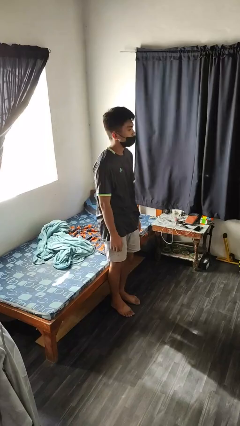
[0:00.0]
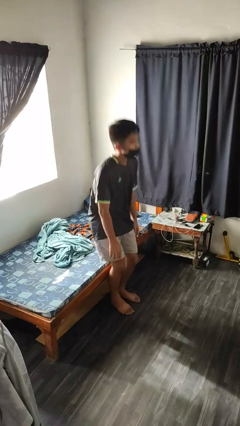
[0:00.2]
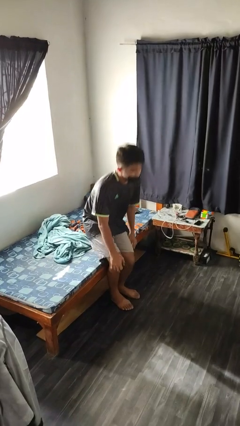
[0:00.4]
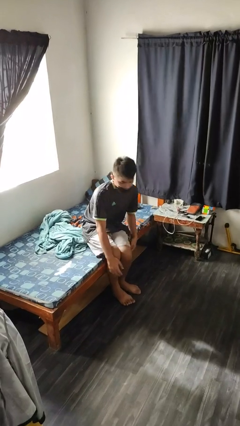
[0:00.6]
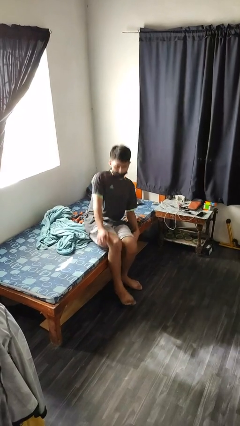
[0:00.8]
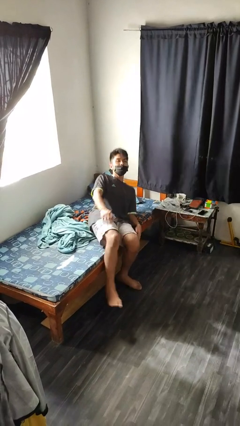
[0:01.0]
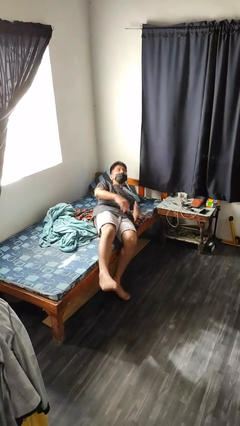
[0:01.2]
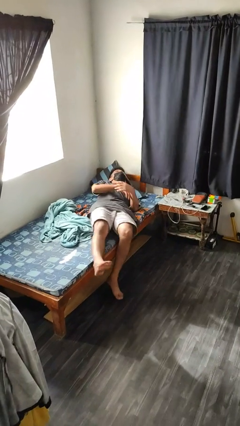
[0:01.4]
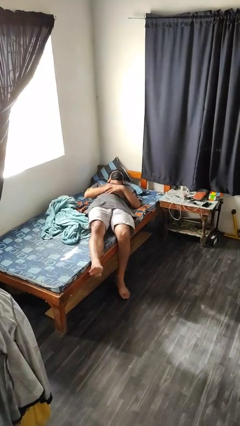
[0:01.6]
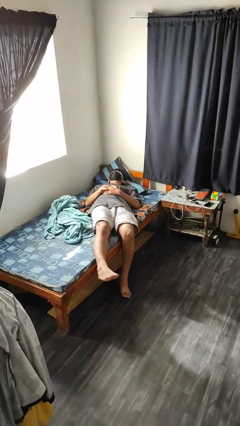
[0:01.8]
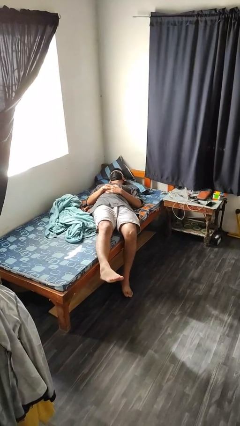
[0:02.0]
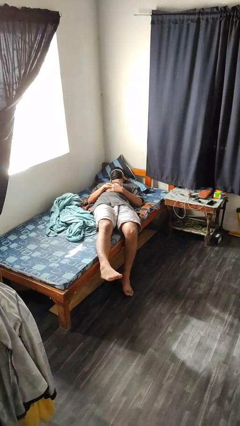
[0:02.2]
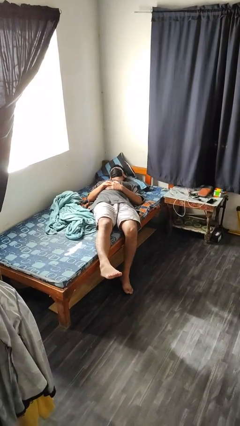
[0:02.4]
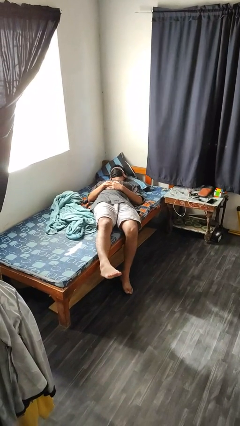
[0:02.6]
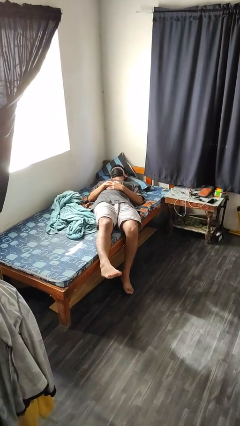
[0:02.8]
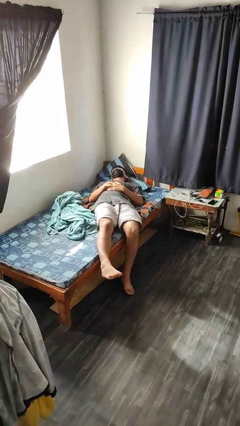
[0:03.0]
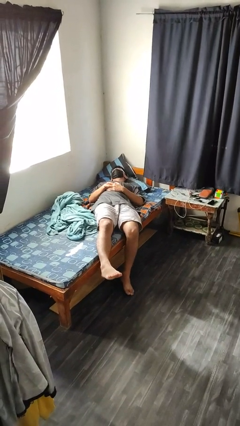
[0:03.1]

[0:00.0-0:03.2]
person lies down on bed

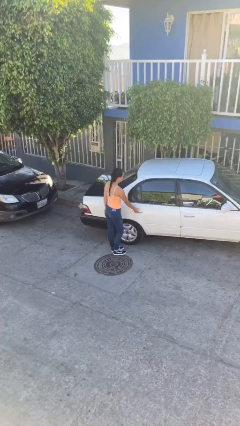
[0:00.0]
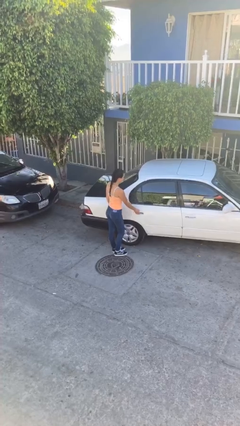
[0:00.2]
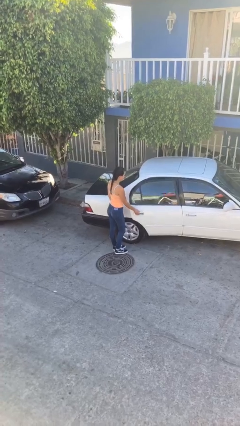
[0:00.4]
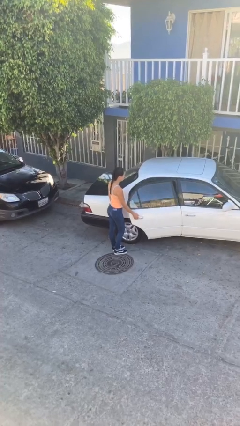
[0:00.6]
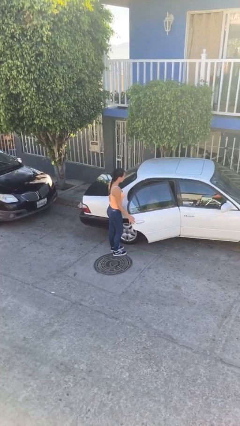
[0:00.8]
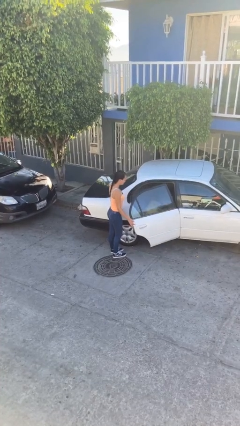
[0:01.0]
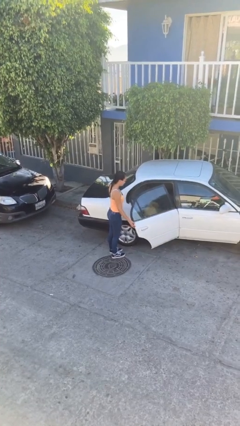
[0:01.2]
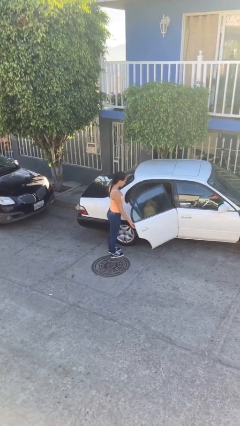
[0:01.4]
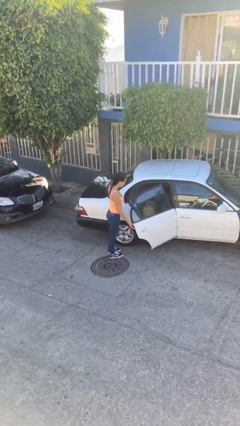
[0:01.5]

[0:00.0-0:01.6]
person opens car door

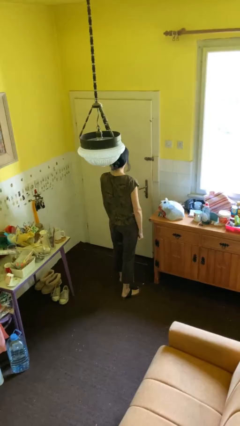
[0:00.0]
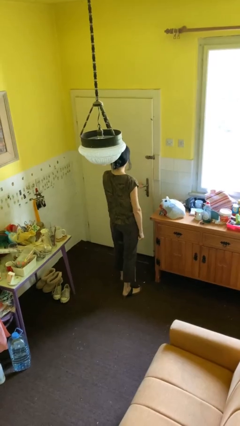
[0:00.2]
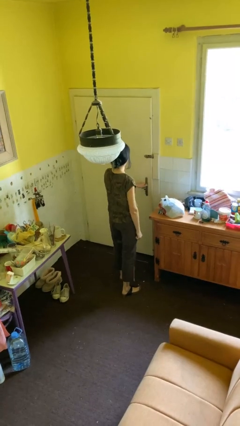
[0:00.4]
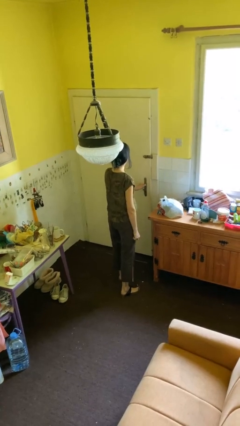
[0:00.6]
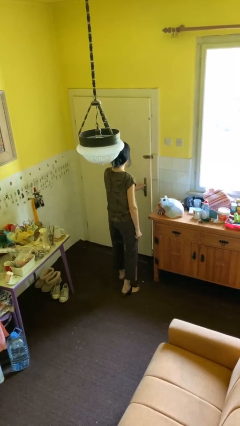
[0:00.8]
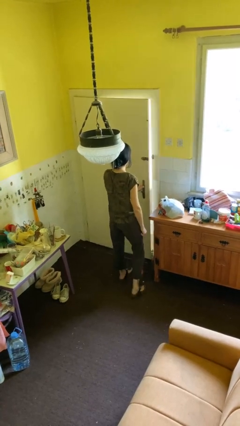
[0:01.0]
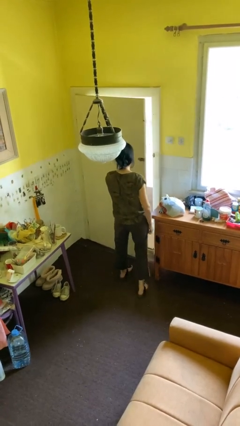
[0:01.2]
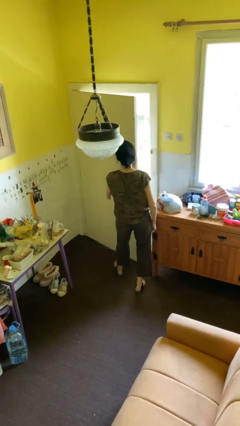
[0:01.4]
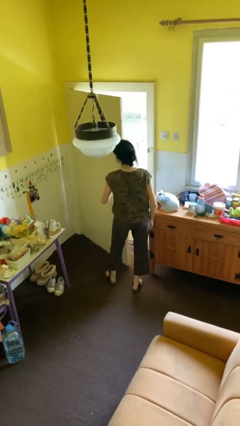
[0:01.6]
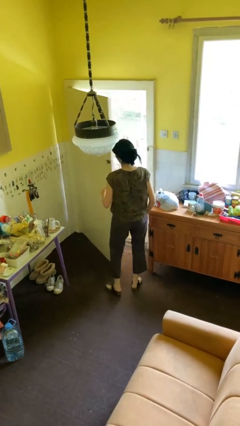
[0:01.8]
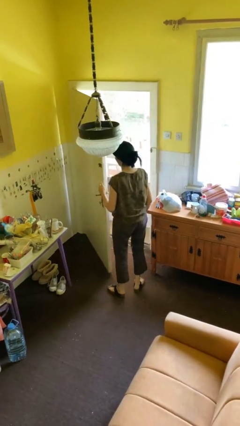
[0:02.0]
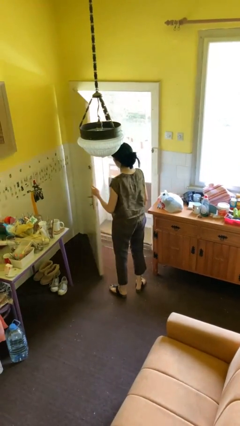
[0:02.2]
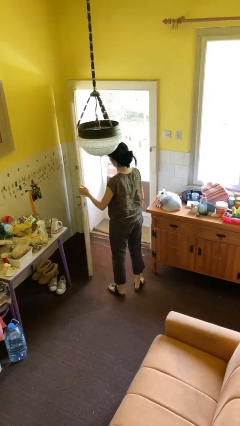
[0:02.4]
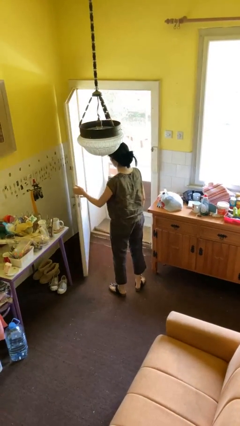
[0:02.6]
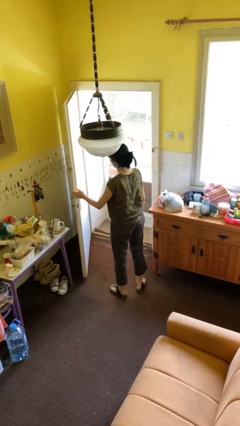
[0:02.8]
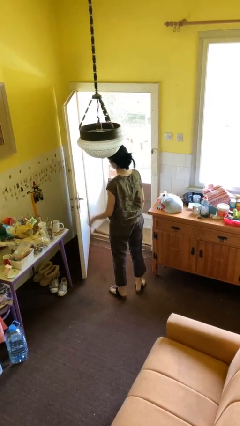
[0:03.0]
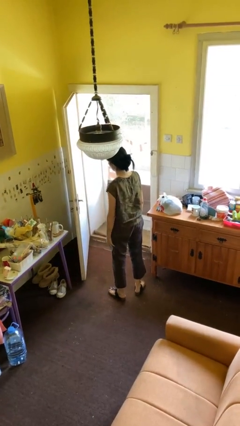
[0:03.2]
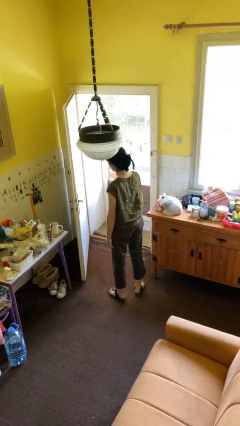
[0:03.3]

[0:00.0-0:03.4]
person opens facility door

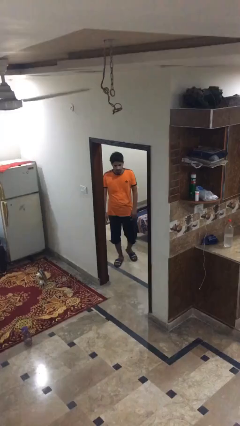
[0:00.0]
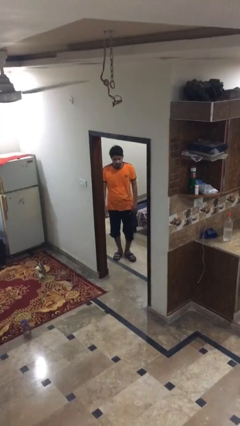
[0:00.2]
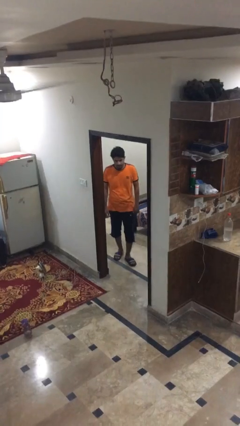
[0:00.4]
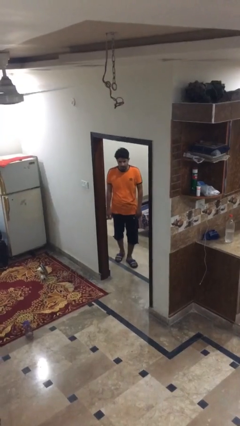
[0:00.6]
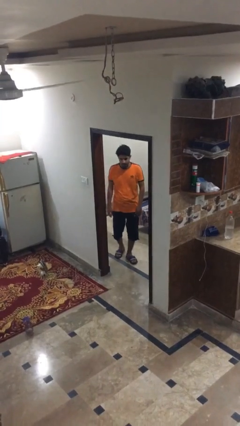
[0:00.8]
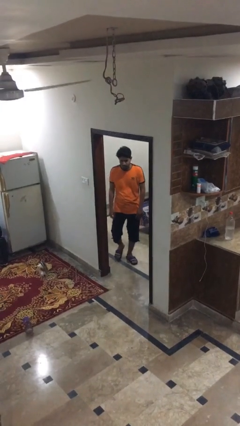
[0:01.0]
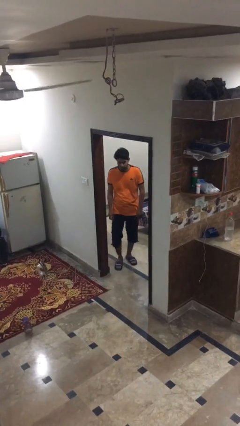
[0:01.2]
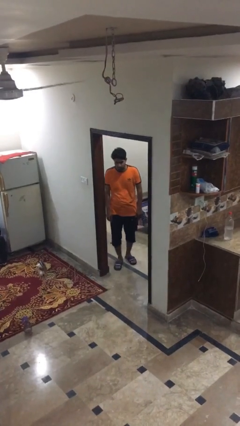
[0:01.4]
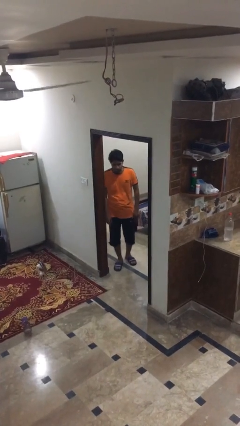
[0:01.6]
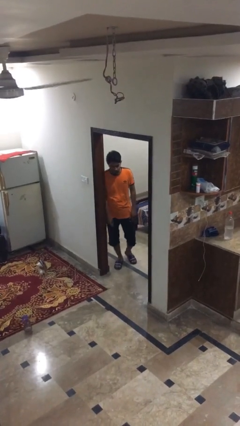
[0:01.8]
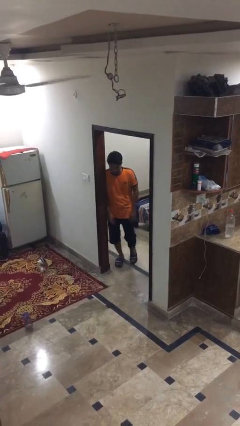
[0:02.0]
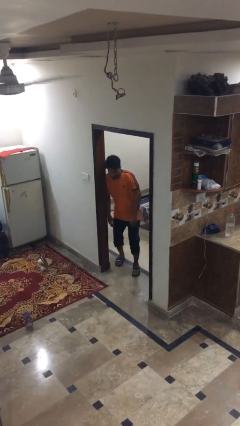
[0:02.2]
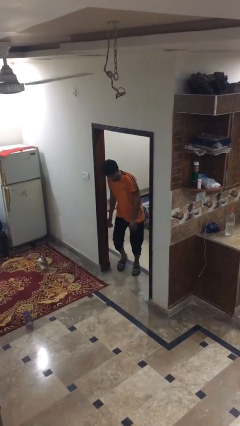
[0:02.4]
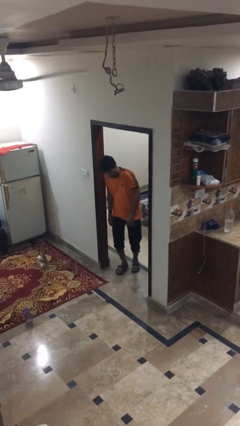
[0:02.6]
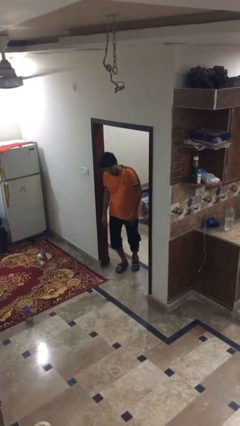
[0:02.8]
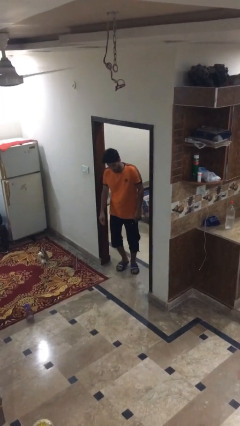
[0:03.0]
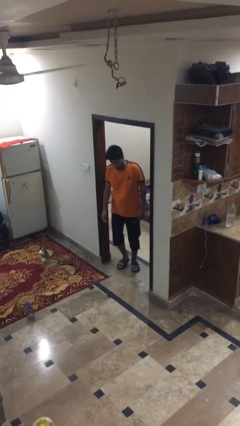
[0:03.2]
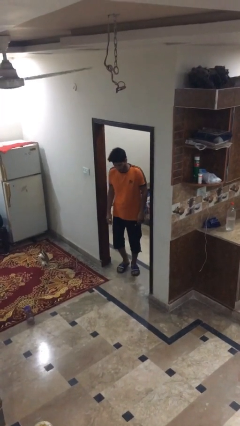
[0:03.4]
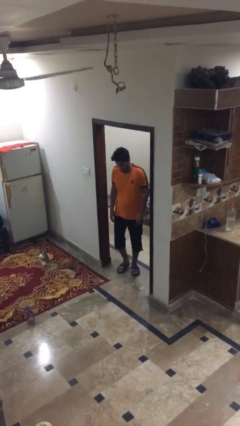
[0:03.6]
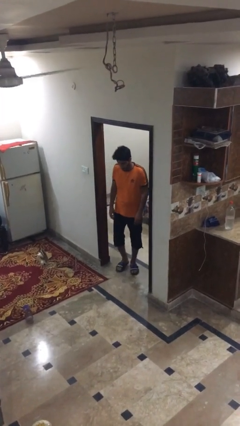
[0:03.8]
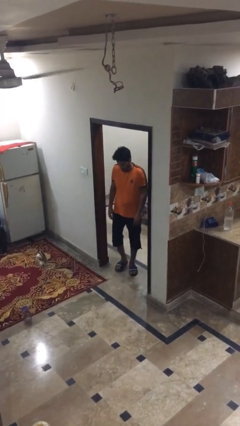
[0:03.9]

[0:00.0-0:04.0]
person bumps into wall

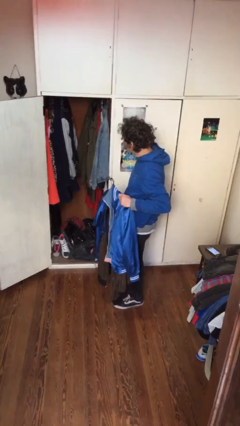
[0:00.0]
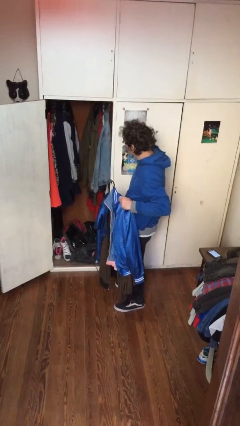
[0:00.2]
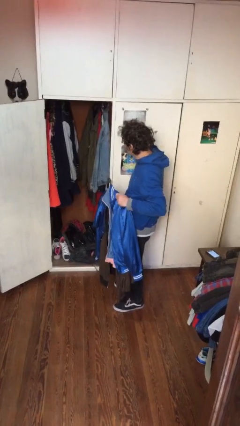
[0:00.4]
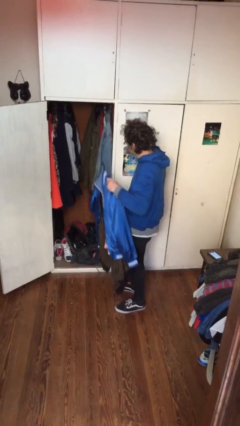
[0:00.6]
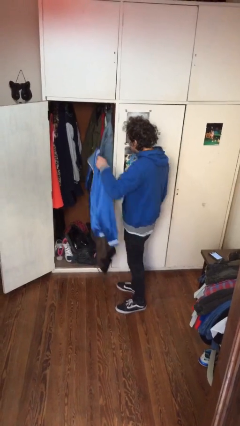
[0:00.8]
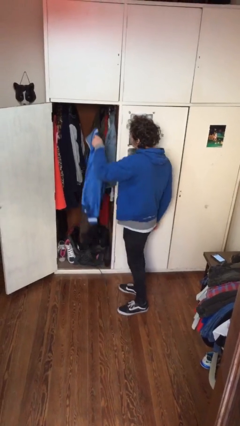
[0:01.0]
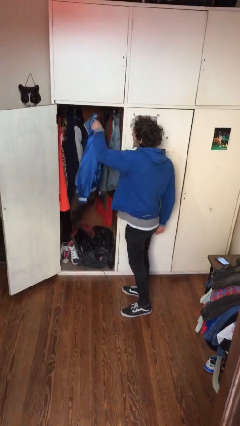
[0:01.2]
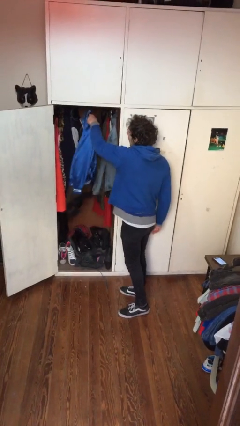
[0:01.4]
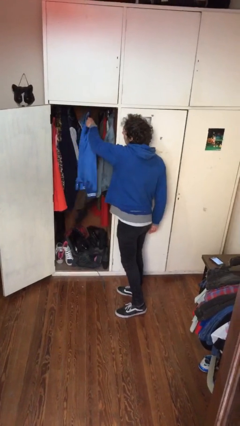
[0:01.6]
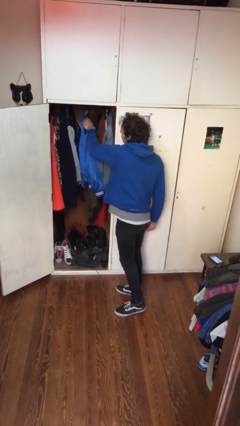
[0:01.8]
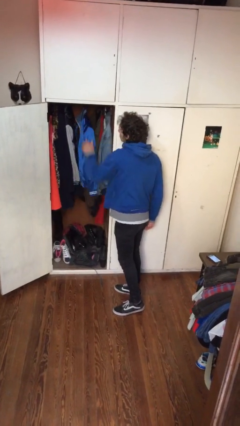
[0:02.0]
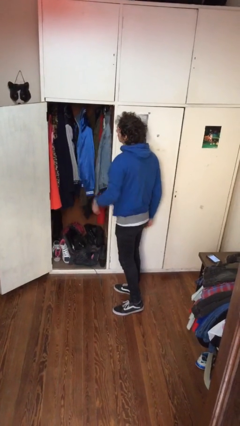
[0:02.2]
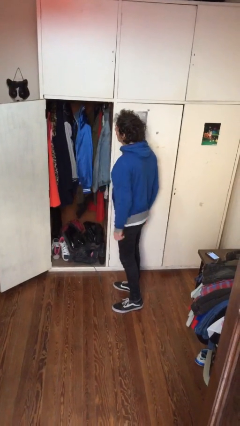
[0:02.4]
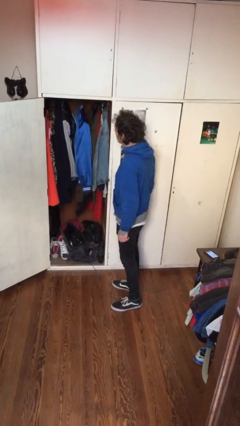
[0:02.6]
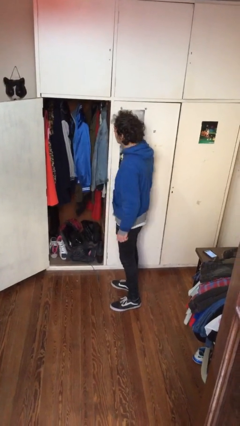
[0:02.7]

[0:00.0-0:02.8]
person puts clothes into closet

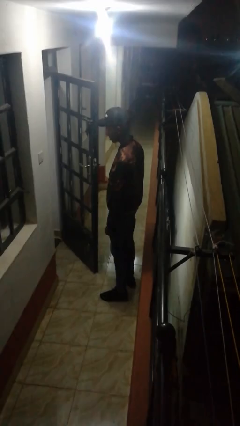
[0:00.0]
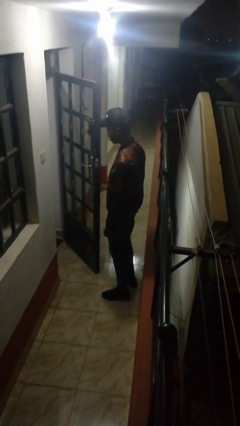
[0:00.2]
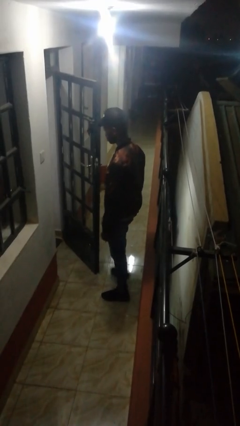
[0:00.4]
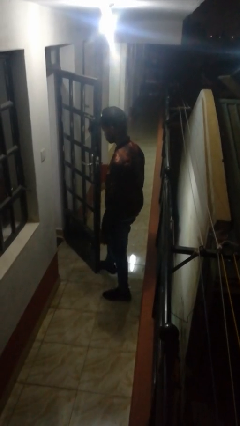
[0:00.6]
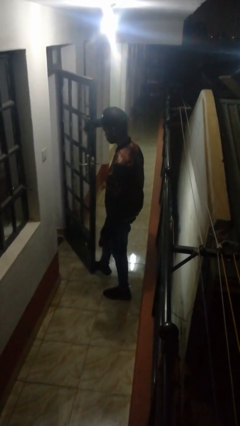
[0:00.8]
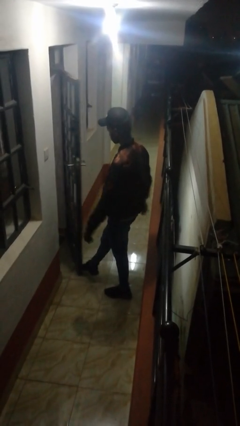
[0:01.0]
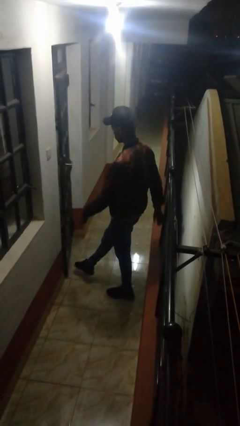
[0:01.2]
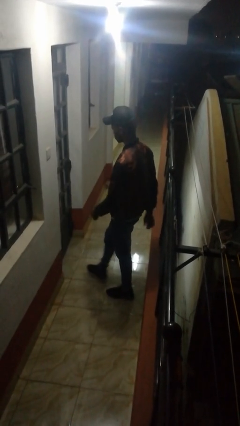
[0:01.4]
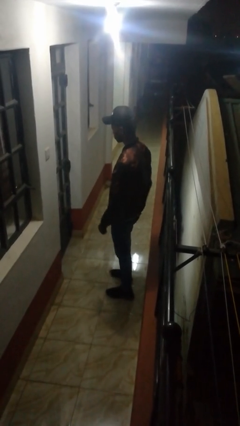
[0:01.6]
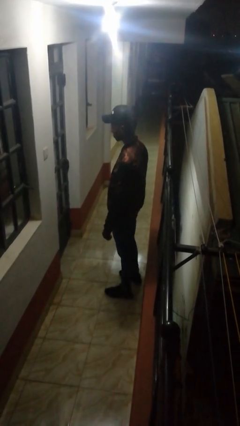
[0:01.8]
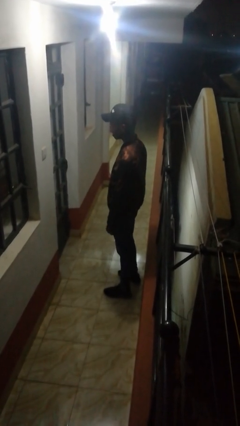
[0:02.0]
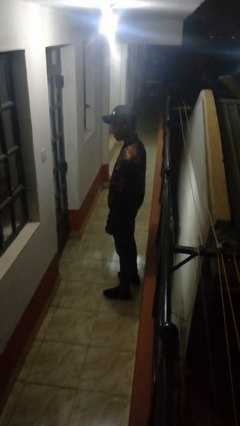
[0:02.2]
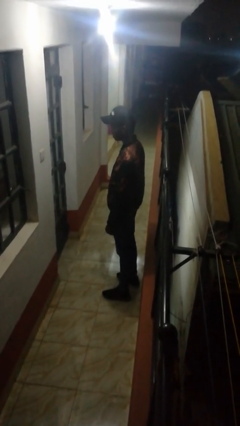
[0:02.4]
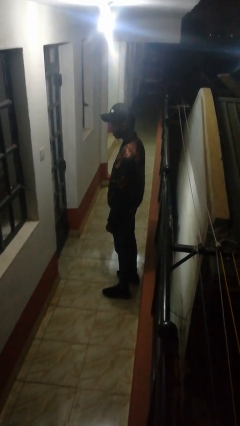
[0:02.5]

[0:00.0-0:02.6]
person closes door with foot
